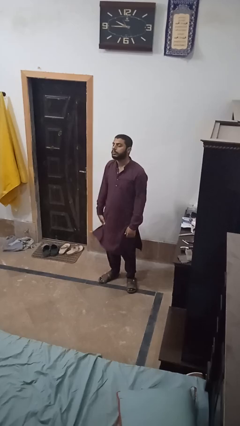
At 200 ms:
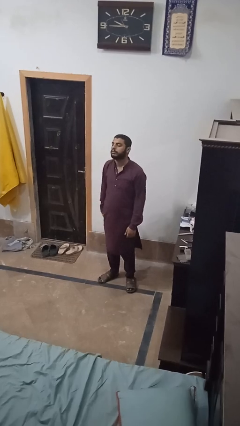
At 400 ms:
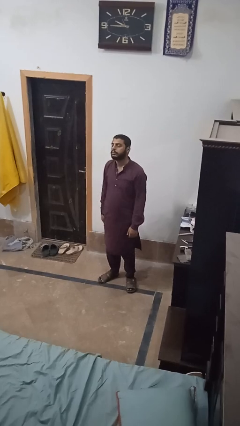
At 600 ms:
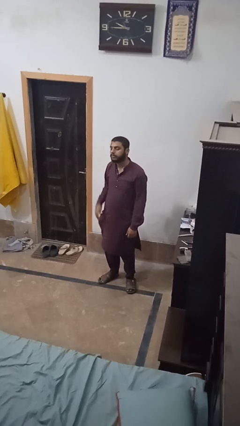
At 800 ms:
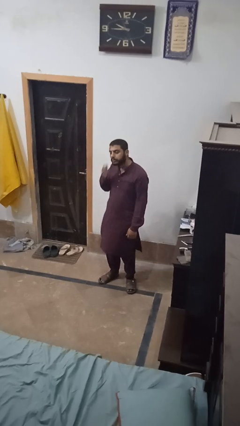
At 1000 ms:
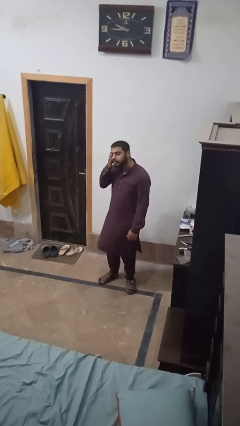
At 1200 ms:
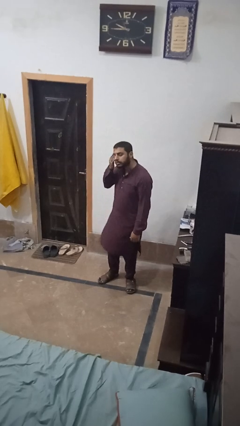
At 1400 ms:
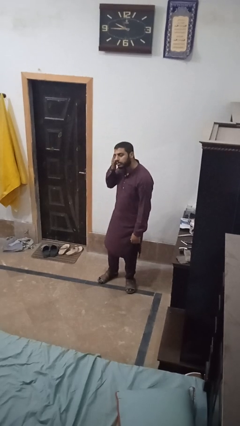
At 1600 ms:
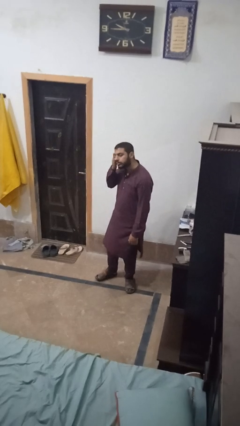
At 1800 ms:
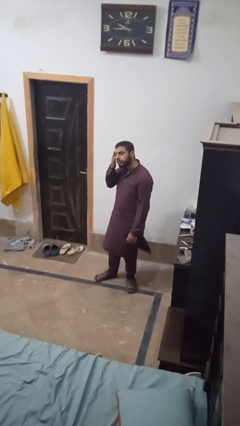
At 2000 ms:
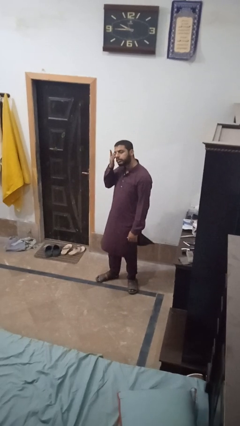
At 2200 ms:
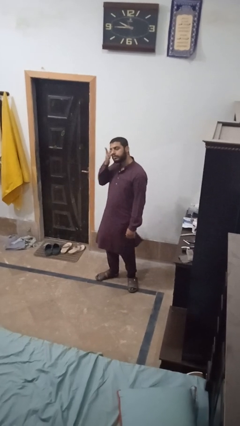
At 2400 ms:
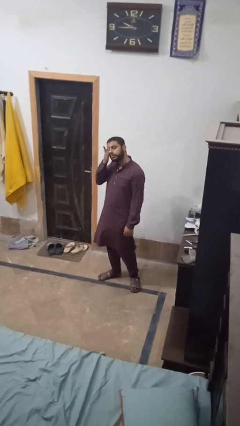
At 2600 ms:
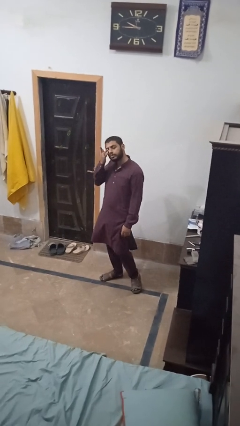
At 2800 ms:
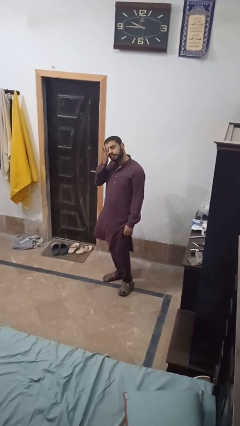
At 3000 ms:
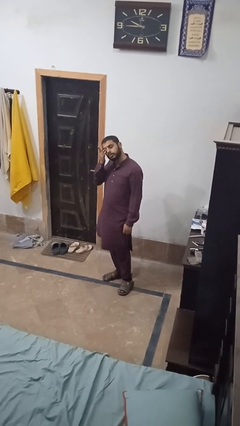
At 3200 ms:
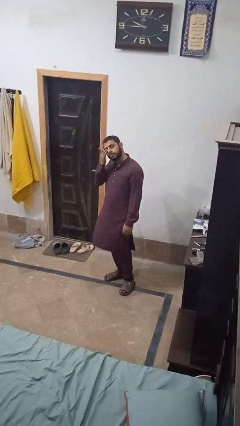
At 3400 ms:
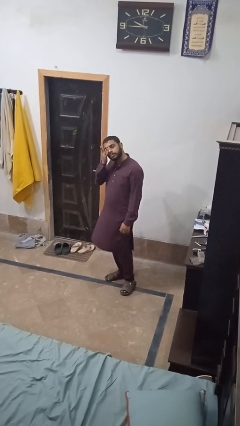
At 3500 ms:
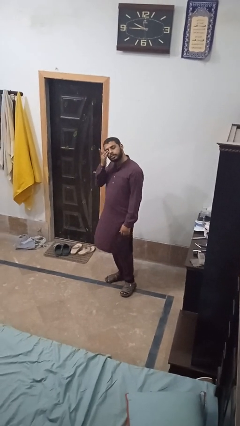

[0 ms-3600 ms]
person rubs eyes

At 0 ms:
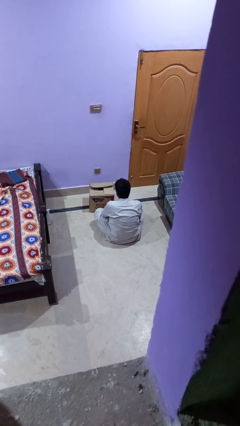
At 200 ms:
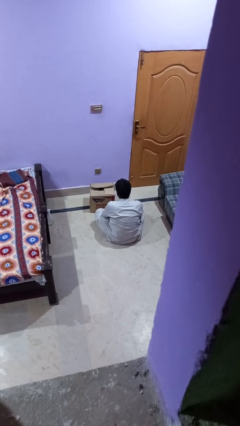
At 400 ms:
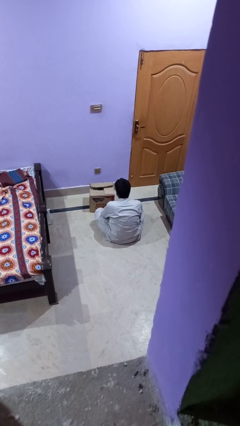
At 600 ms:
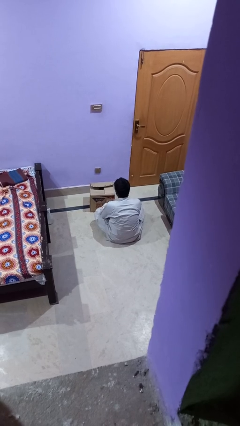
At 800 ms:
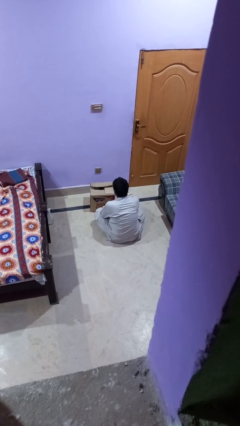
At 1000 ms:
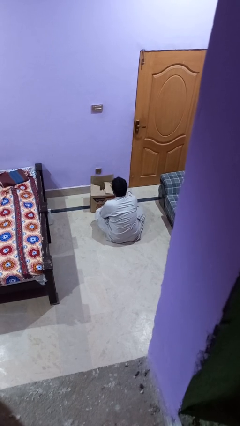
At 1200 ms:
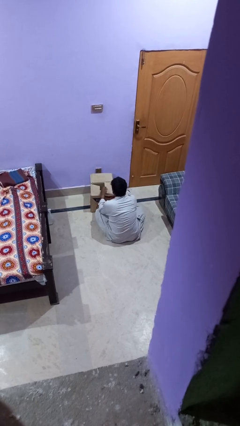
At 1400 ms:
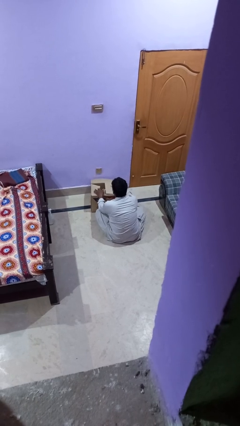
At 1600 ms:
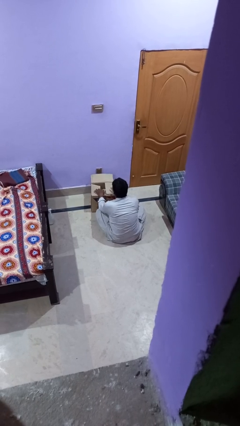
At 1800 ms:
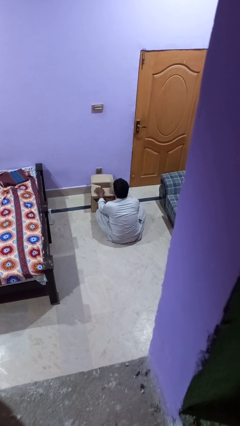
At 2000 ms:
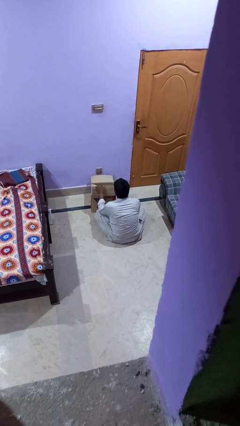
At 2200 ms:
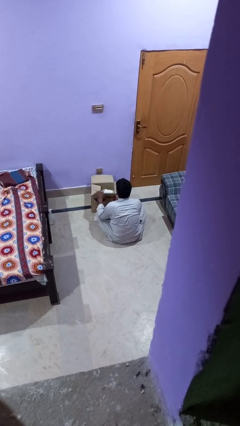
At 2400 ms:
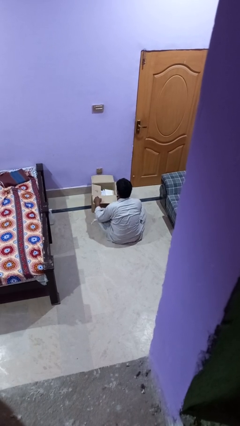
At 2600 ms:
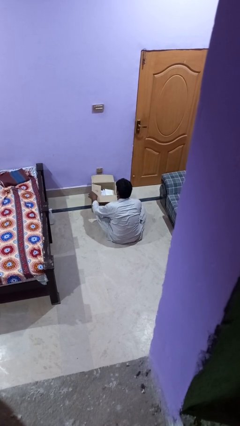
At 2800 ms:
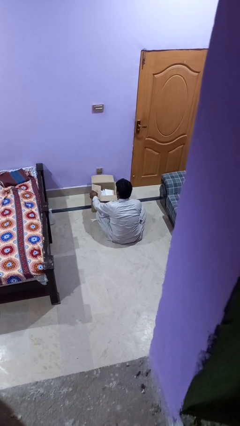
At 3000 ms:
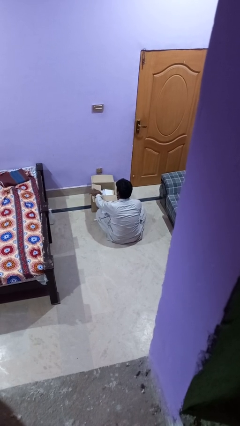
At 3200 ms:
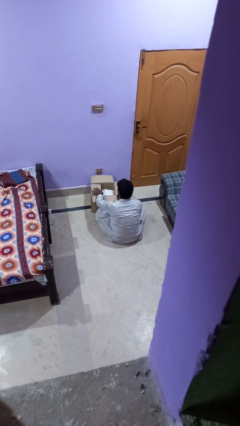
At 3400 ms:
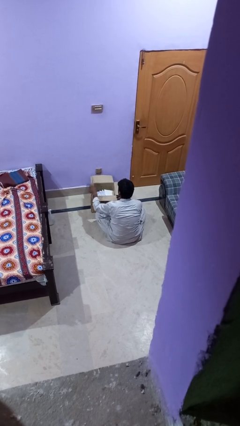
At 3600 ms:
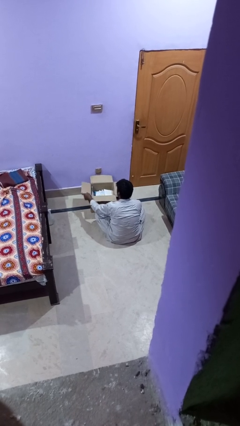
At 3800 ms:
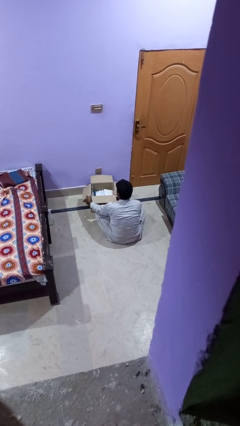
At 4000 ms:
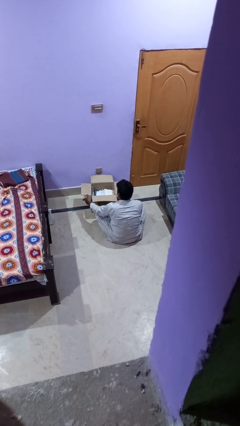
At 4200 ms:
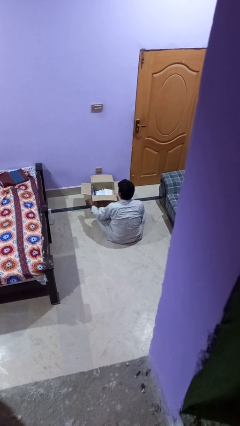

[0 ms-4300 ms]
person opens box

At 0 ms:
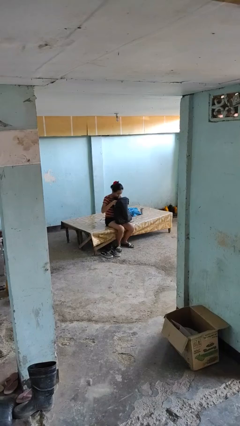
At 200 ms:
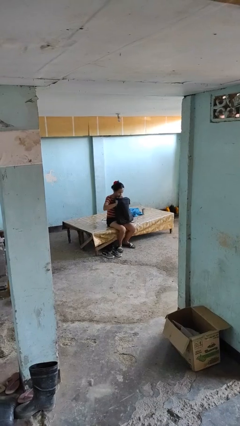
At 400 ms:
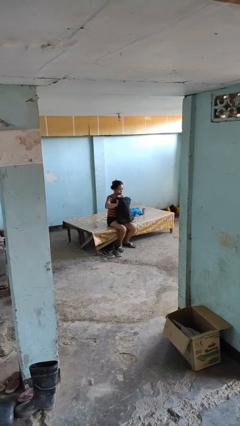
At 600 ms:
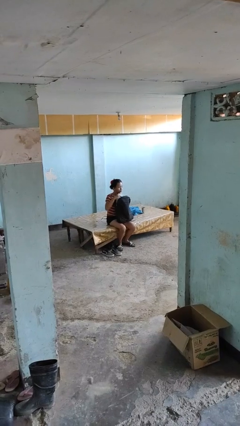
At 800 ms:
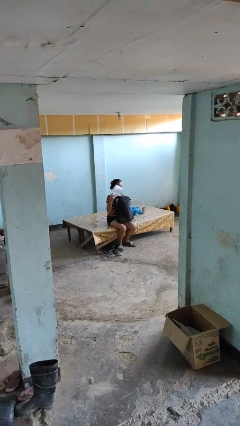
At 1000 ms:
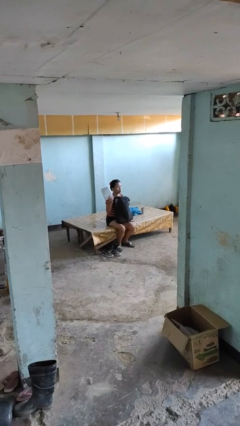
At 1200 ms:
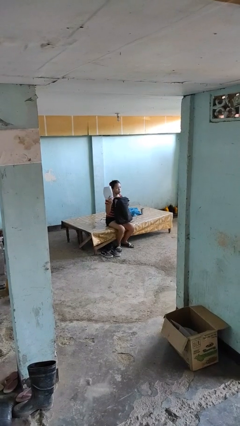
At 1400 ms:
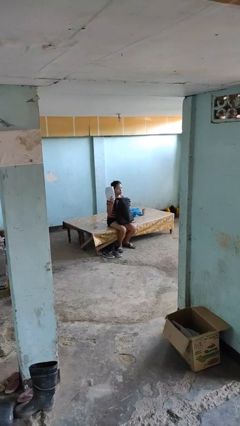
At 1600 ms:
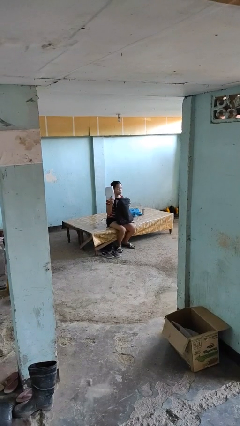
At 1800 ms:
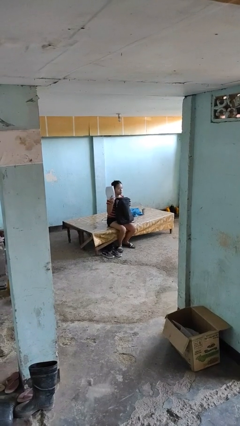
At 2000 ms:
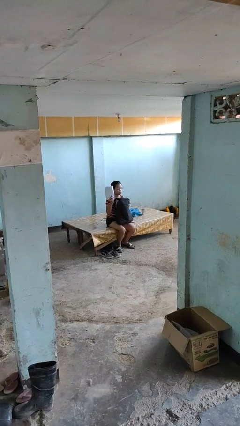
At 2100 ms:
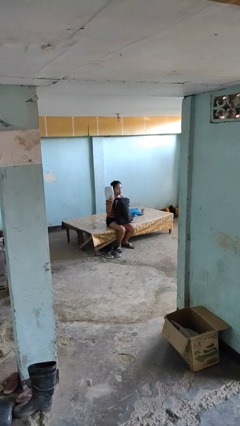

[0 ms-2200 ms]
person takes object from backpack

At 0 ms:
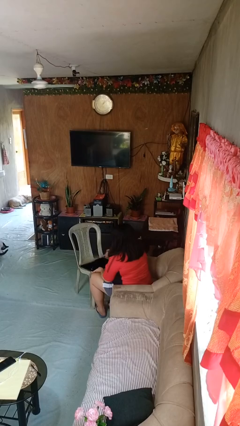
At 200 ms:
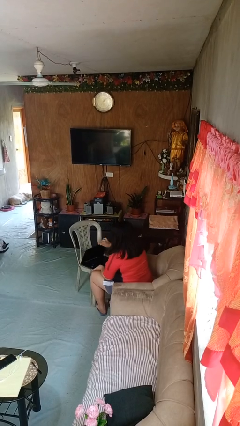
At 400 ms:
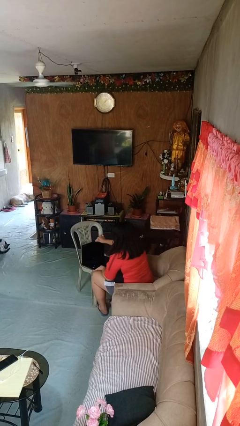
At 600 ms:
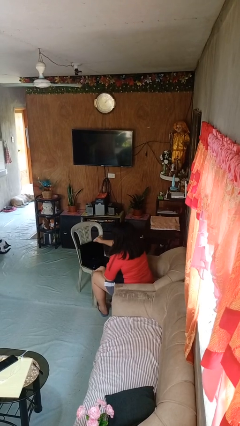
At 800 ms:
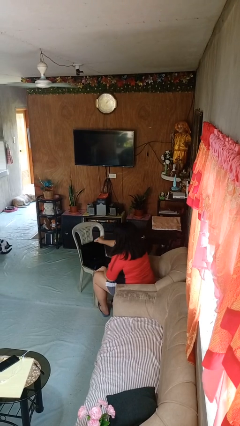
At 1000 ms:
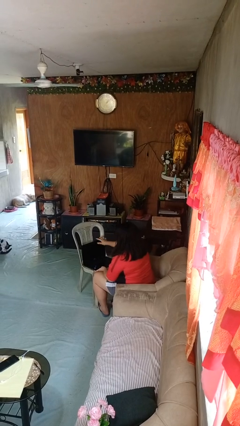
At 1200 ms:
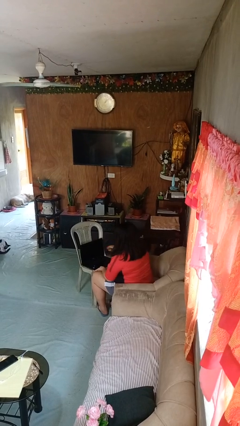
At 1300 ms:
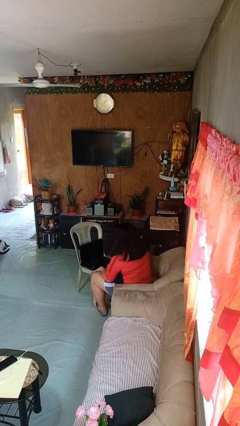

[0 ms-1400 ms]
person opens laptop

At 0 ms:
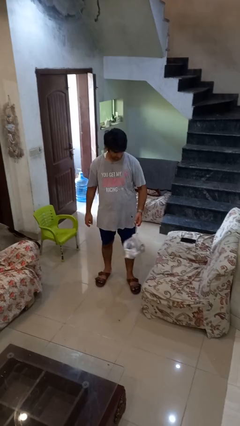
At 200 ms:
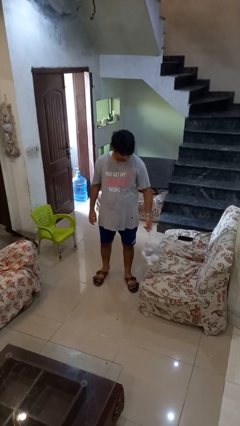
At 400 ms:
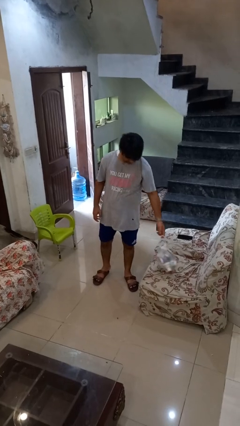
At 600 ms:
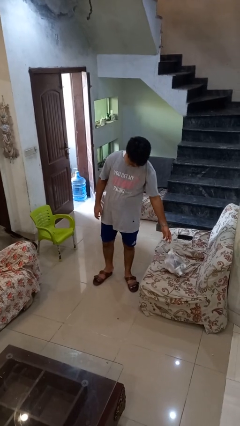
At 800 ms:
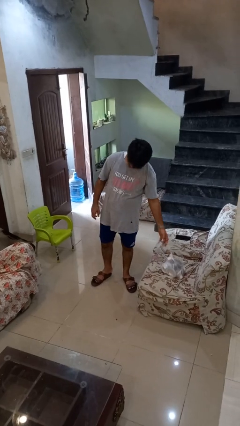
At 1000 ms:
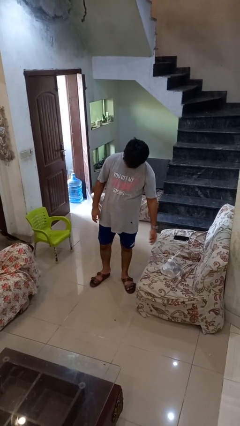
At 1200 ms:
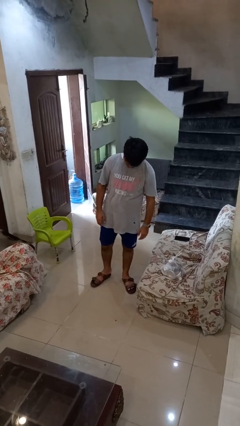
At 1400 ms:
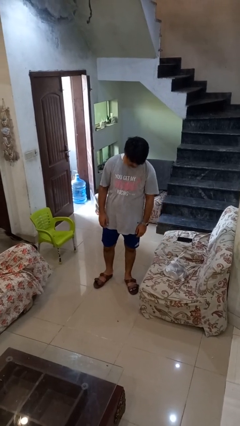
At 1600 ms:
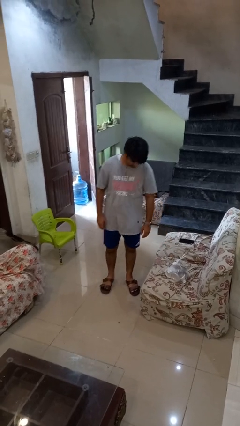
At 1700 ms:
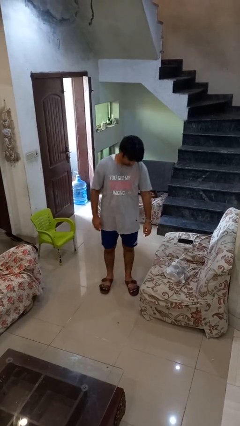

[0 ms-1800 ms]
person puts down object on couch

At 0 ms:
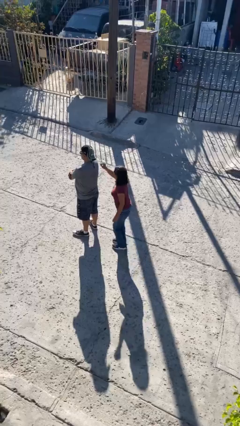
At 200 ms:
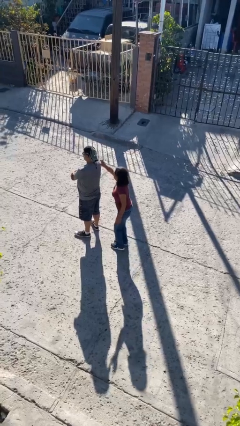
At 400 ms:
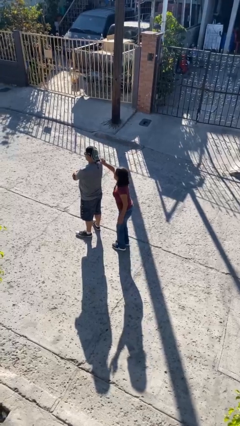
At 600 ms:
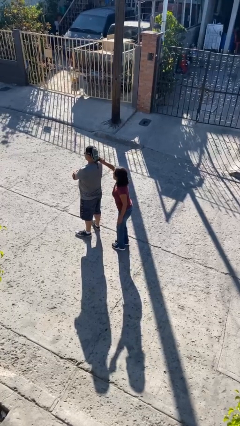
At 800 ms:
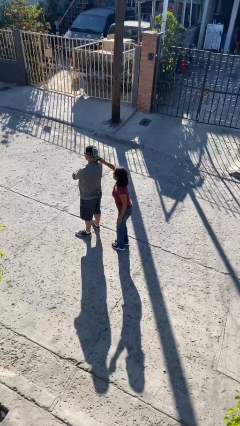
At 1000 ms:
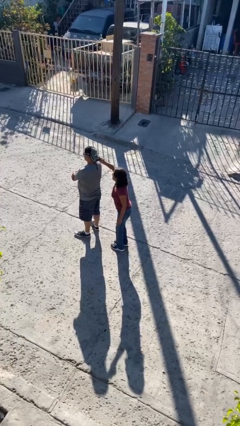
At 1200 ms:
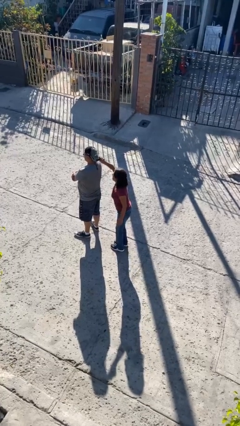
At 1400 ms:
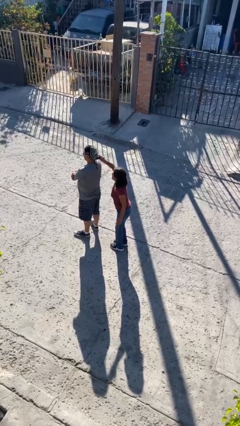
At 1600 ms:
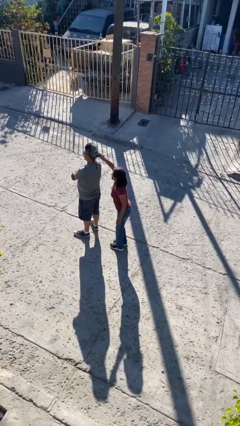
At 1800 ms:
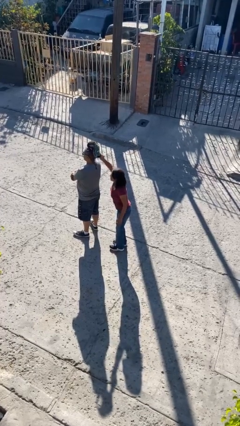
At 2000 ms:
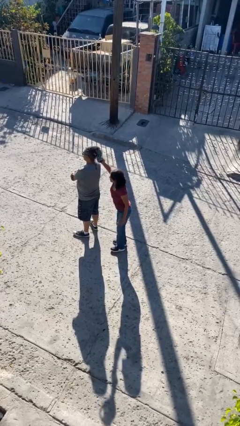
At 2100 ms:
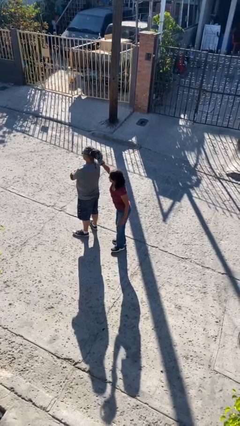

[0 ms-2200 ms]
person steals object from person

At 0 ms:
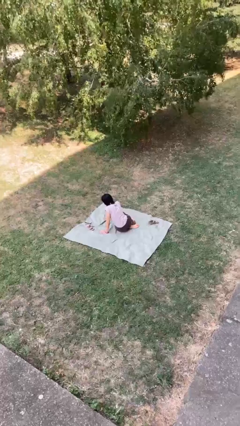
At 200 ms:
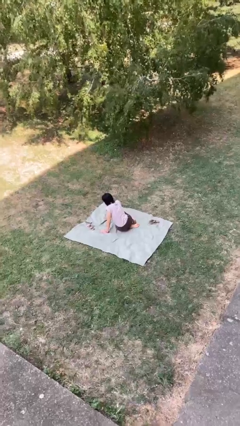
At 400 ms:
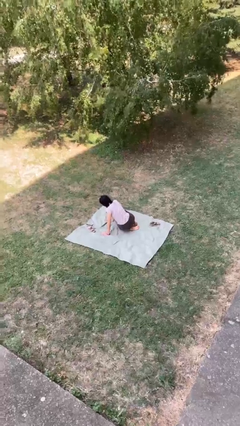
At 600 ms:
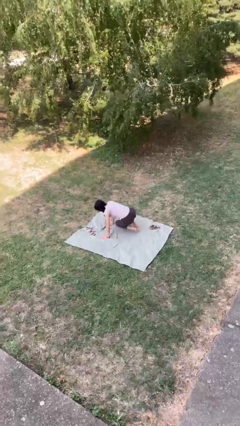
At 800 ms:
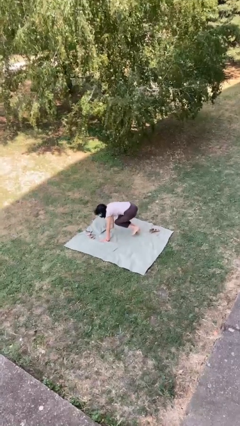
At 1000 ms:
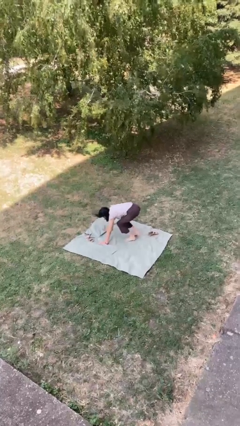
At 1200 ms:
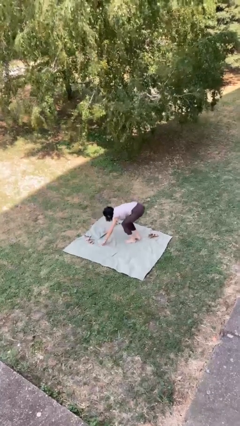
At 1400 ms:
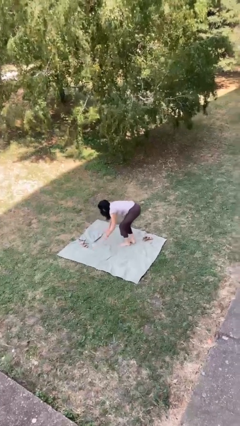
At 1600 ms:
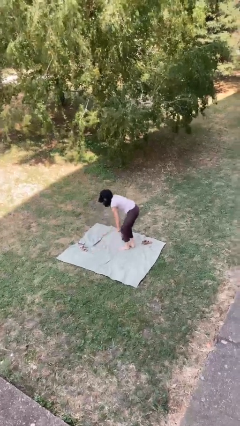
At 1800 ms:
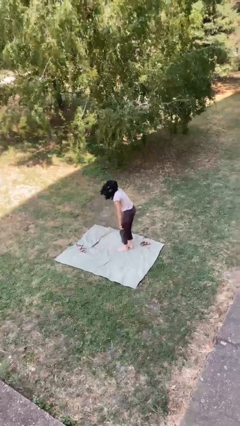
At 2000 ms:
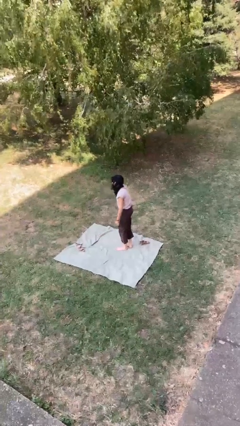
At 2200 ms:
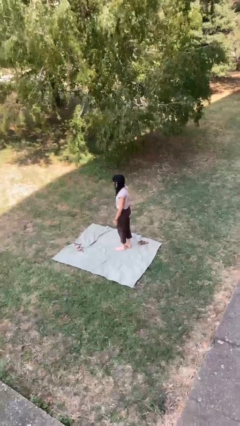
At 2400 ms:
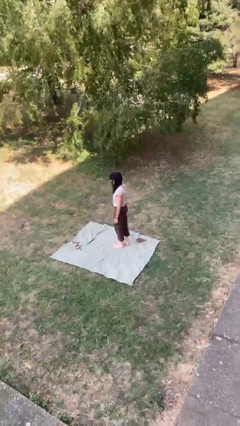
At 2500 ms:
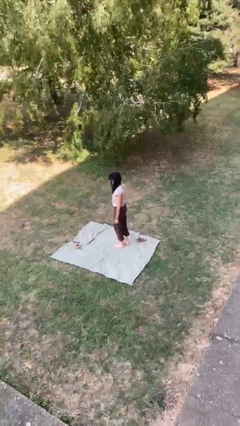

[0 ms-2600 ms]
person stands up from floor
